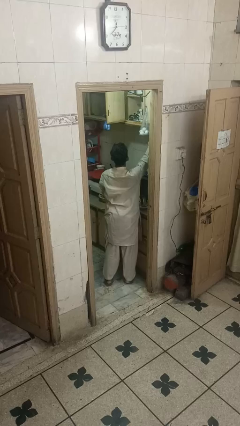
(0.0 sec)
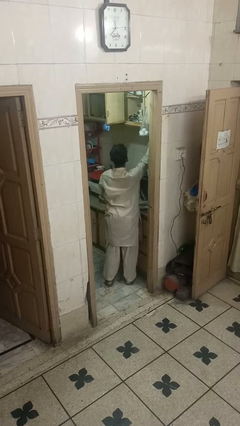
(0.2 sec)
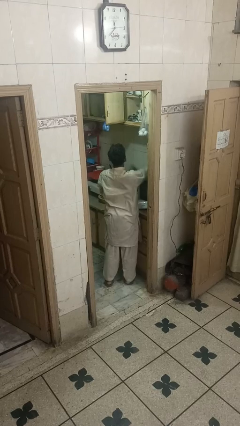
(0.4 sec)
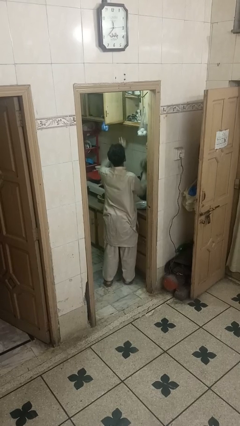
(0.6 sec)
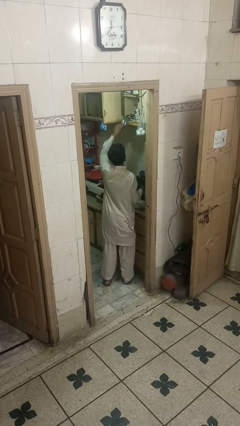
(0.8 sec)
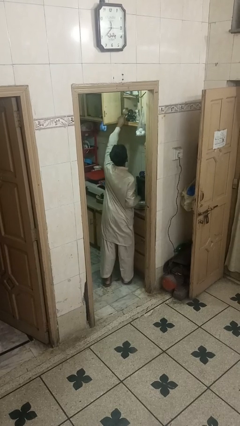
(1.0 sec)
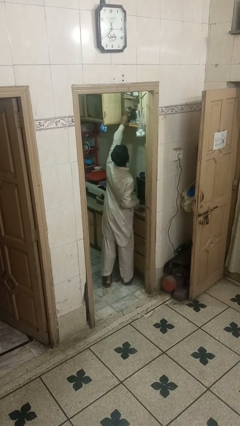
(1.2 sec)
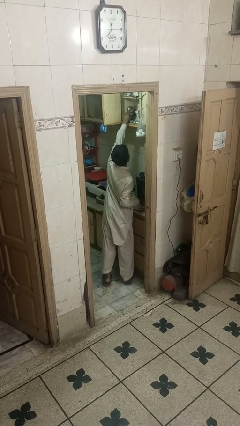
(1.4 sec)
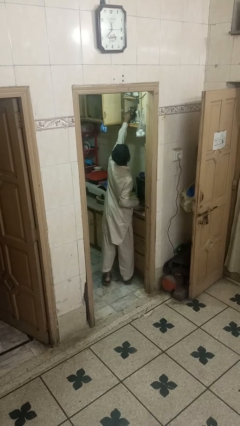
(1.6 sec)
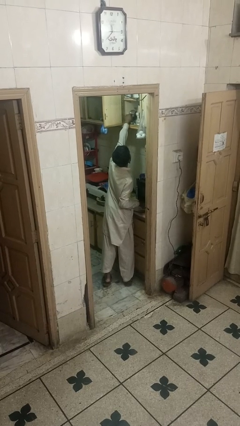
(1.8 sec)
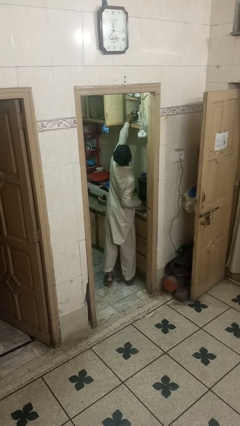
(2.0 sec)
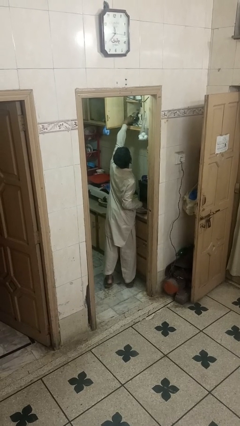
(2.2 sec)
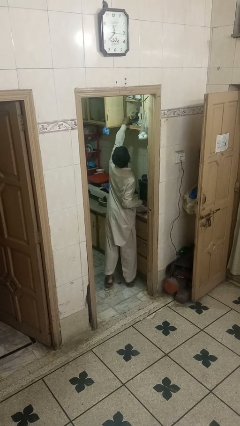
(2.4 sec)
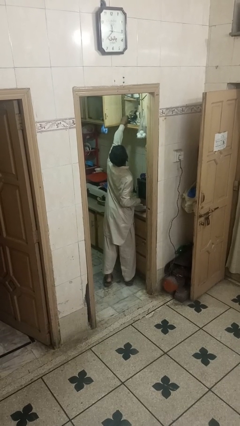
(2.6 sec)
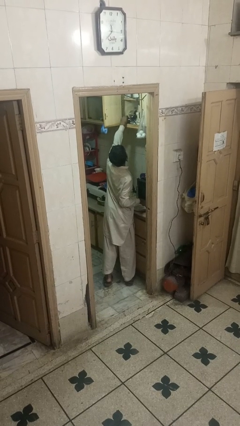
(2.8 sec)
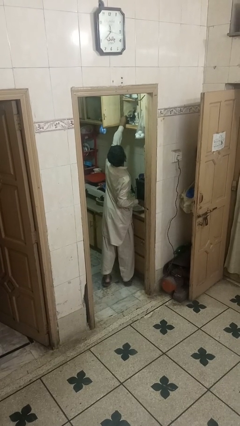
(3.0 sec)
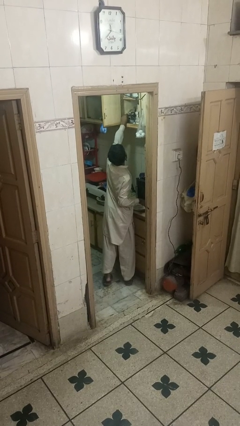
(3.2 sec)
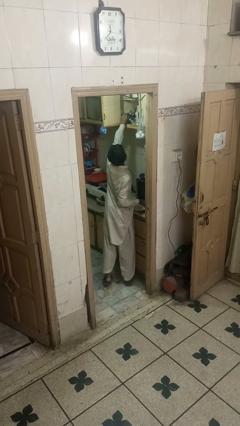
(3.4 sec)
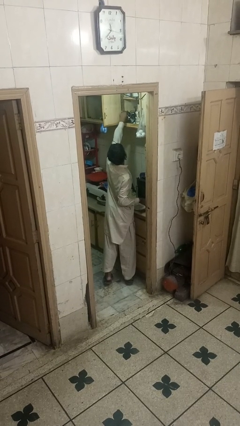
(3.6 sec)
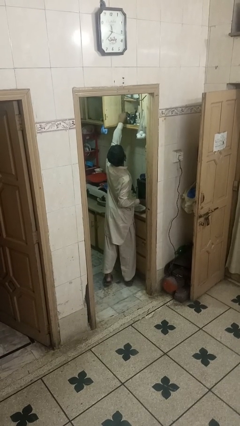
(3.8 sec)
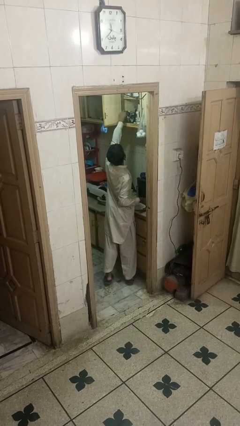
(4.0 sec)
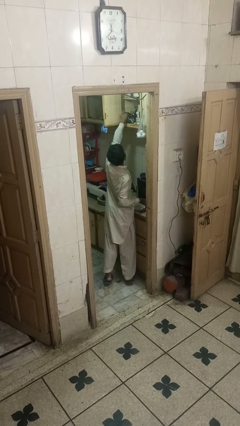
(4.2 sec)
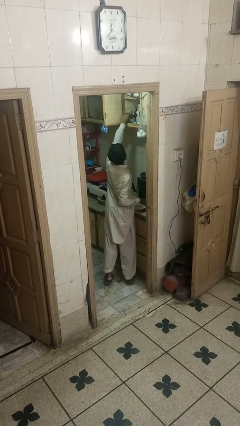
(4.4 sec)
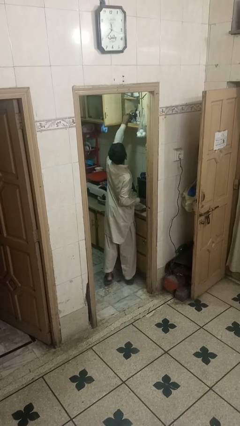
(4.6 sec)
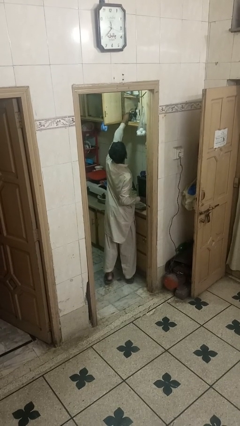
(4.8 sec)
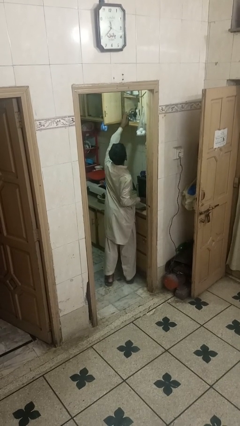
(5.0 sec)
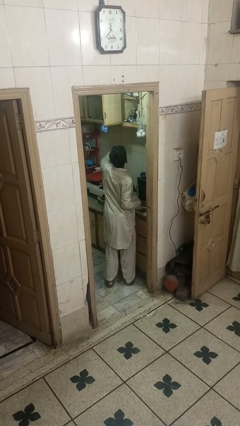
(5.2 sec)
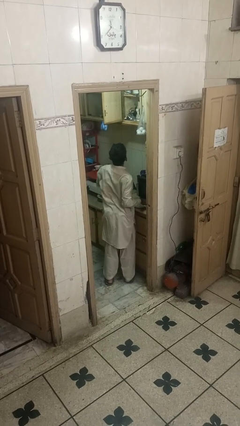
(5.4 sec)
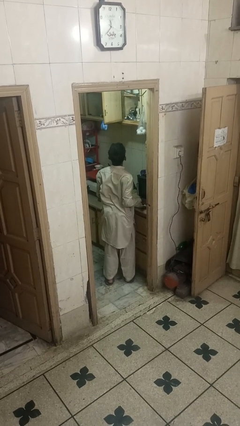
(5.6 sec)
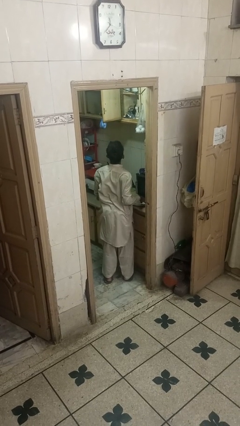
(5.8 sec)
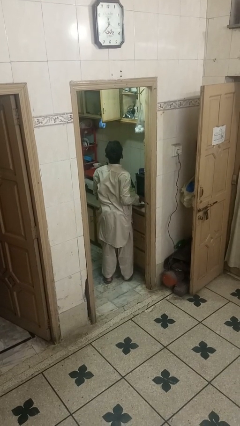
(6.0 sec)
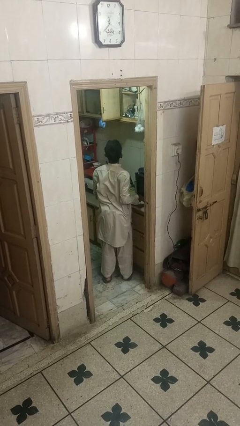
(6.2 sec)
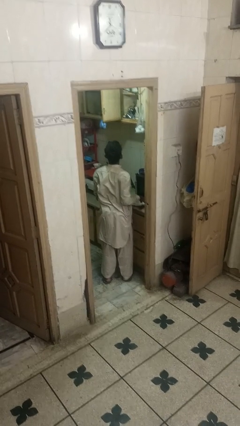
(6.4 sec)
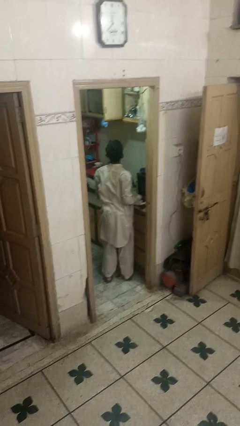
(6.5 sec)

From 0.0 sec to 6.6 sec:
person puts object in cabinet

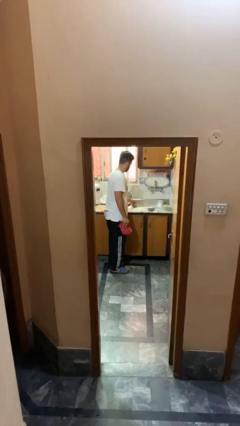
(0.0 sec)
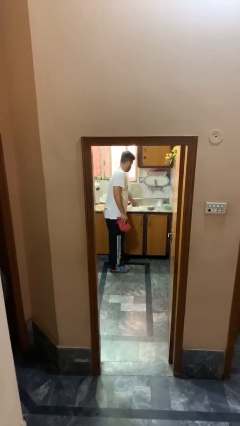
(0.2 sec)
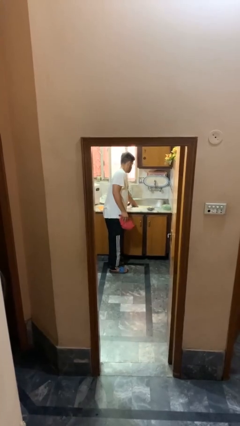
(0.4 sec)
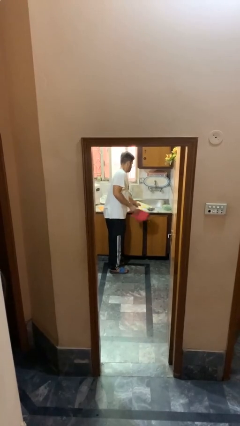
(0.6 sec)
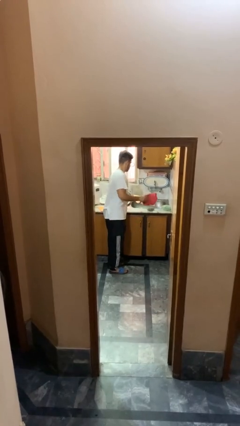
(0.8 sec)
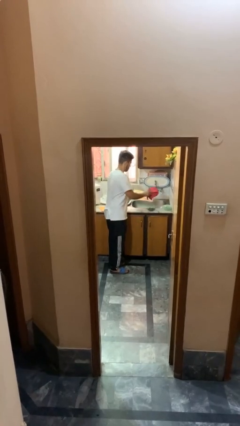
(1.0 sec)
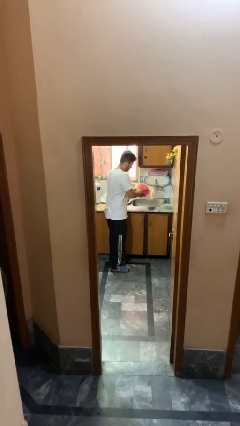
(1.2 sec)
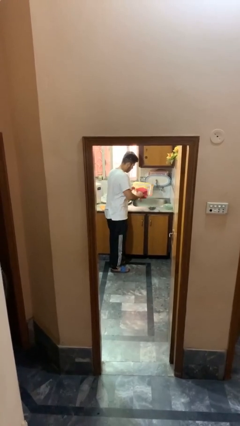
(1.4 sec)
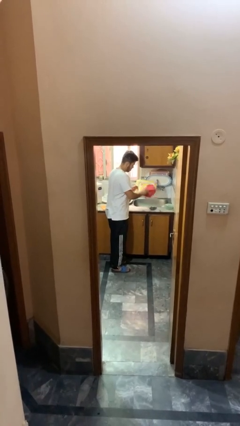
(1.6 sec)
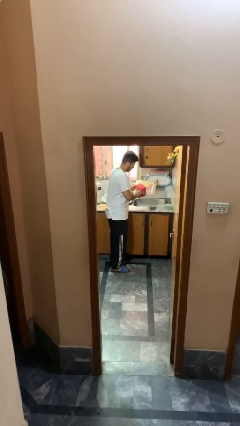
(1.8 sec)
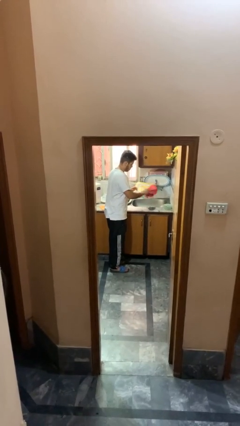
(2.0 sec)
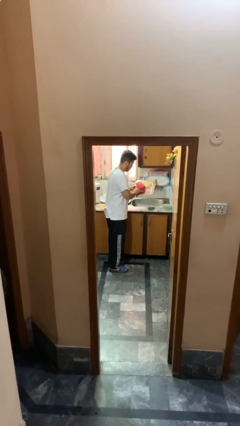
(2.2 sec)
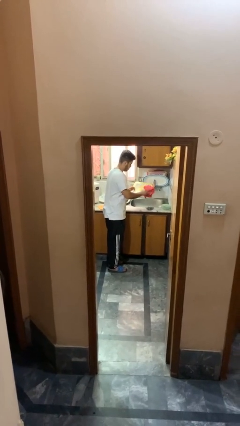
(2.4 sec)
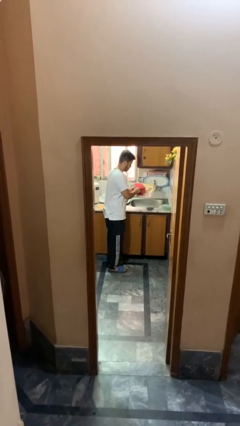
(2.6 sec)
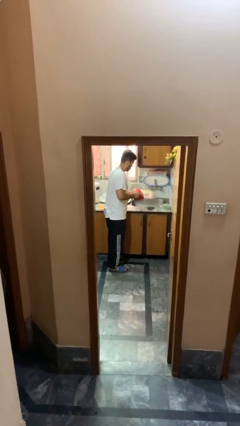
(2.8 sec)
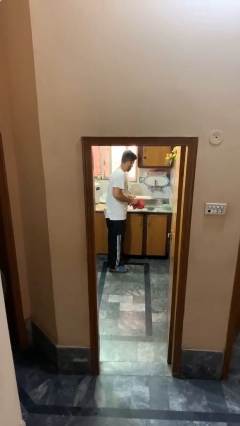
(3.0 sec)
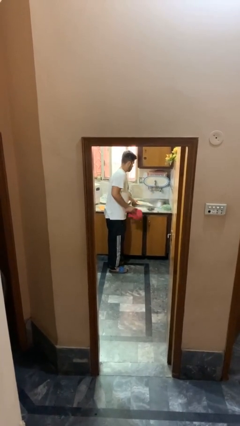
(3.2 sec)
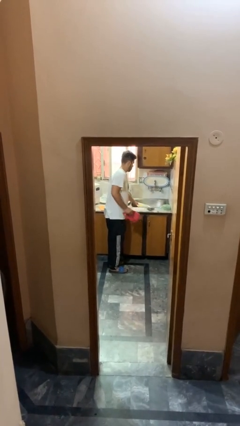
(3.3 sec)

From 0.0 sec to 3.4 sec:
person dries dish

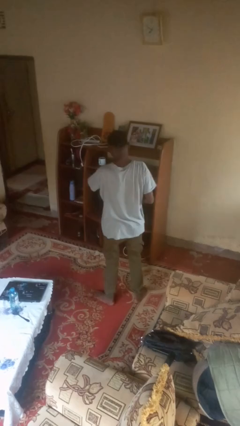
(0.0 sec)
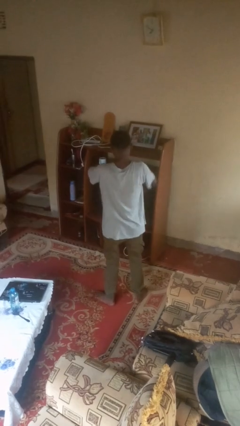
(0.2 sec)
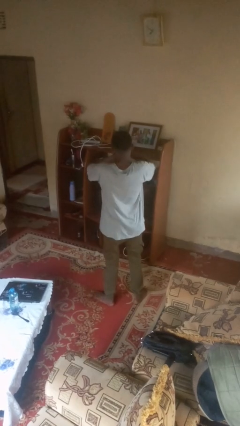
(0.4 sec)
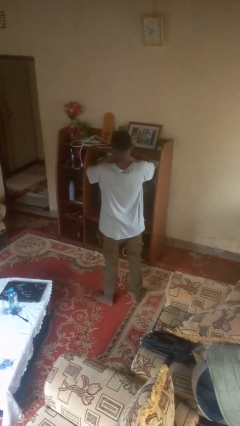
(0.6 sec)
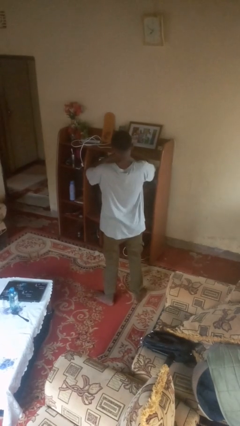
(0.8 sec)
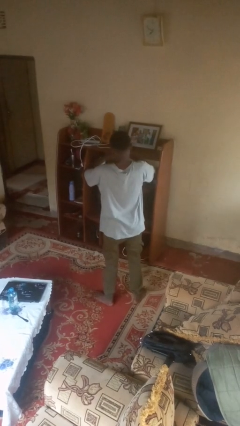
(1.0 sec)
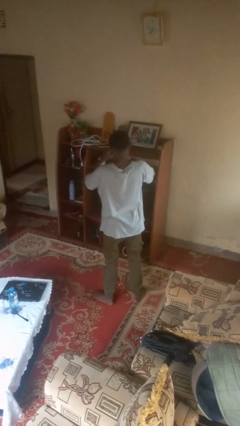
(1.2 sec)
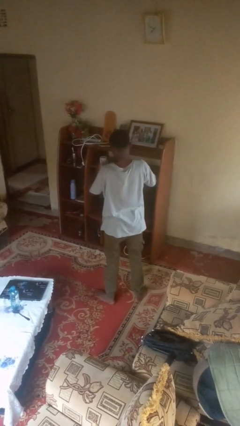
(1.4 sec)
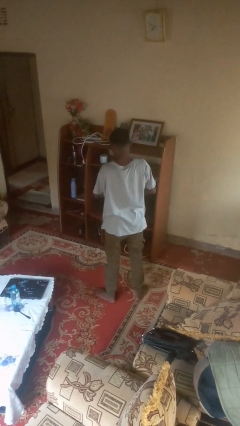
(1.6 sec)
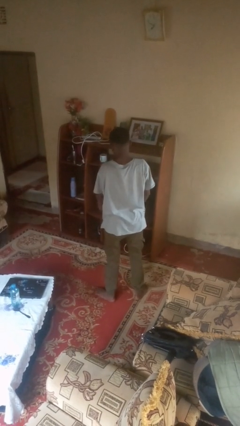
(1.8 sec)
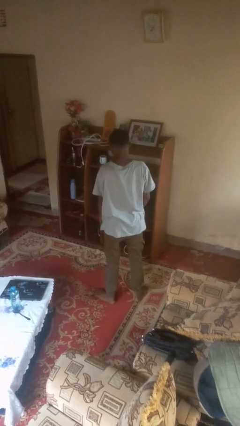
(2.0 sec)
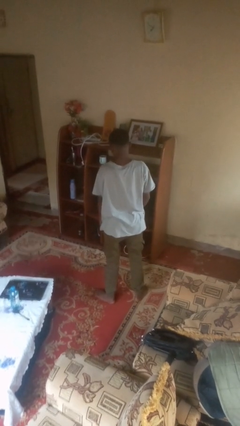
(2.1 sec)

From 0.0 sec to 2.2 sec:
person takes off wristwatch

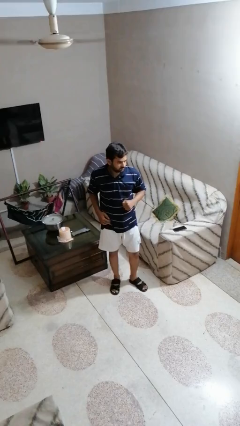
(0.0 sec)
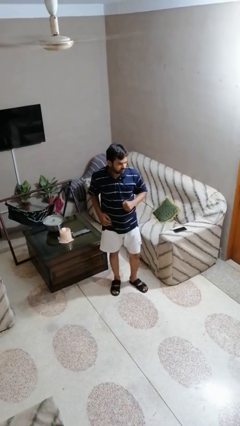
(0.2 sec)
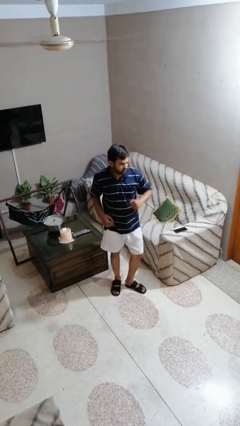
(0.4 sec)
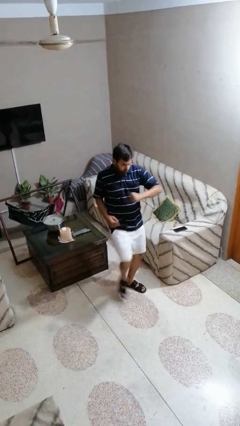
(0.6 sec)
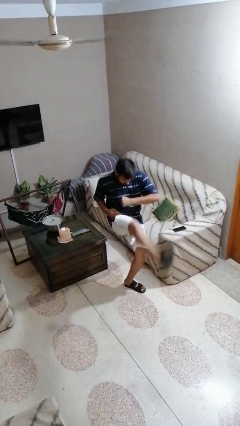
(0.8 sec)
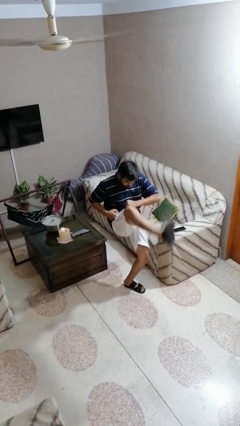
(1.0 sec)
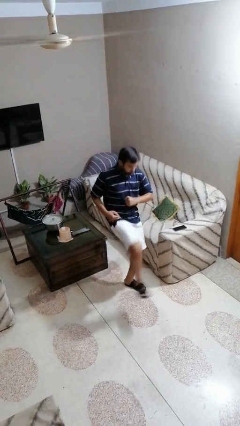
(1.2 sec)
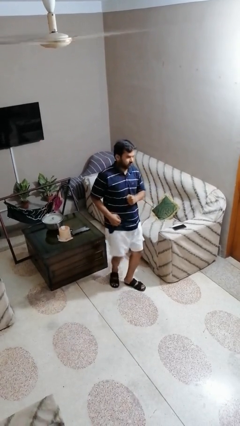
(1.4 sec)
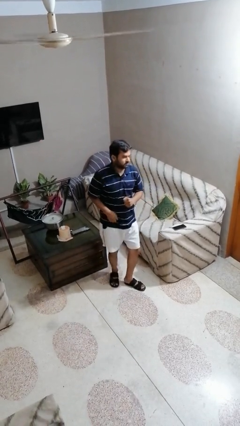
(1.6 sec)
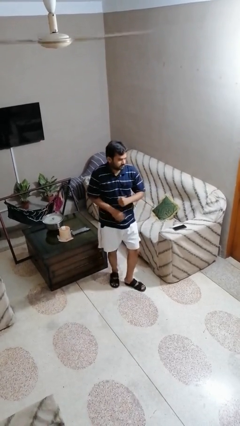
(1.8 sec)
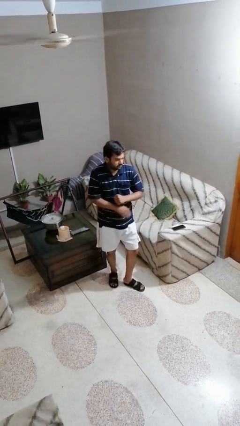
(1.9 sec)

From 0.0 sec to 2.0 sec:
person karate kicks

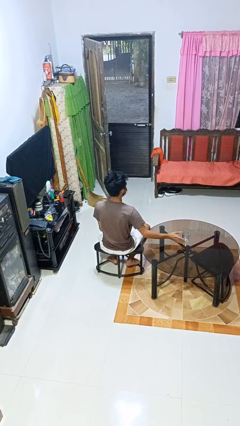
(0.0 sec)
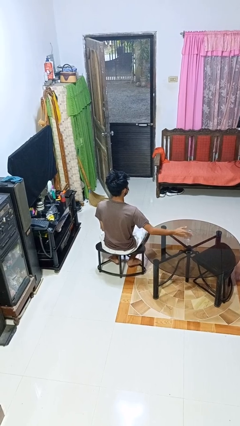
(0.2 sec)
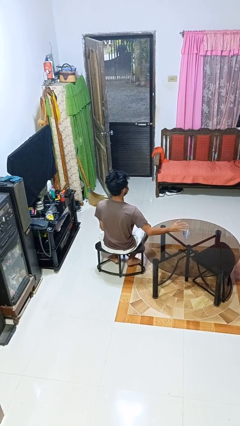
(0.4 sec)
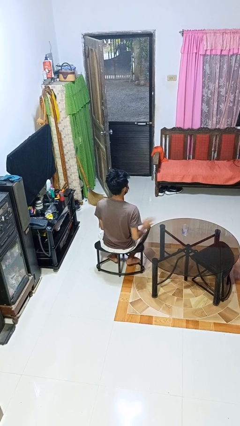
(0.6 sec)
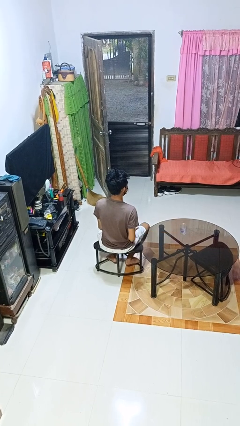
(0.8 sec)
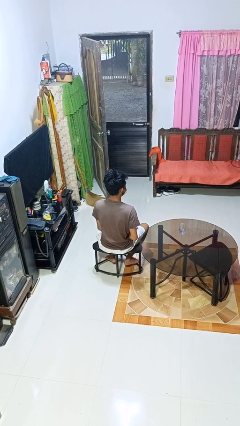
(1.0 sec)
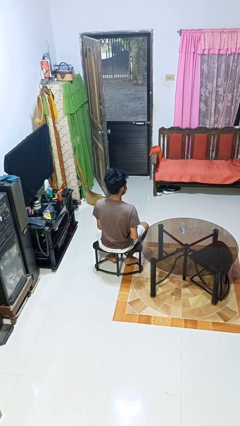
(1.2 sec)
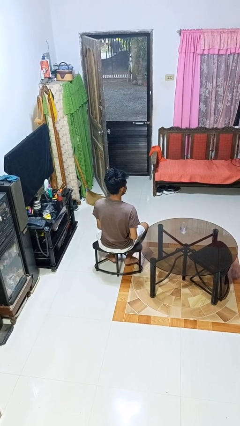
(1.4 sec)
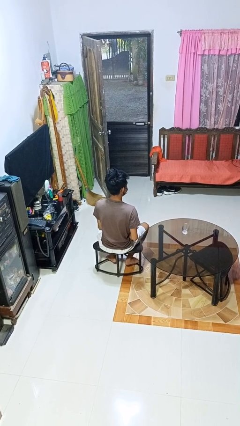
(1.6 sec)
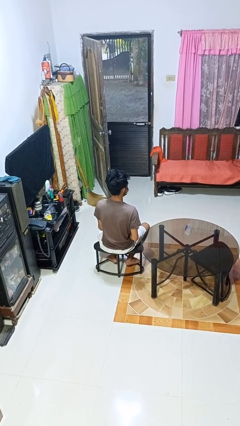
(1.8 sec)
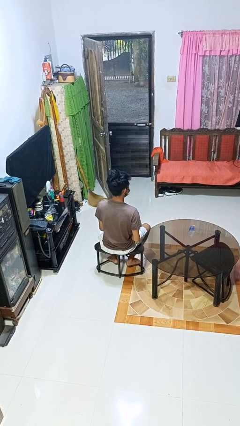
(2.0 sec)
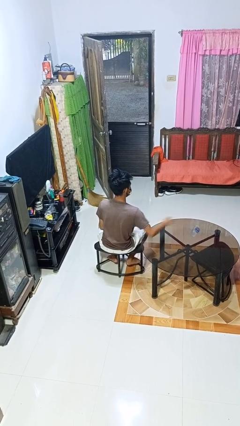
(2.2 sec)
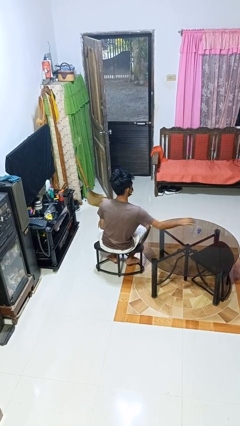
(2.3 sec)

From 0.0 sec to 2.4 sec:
person knocks over glass

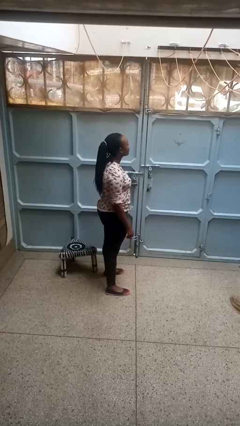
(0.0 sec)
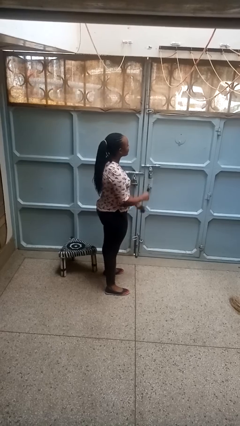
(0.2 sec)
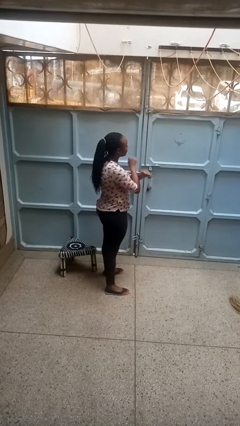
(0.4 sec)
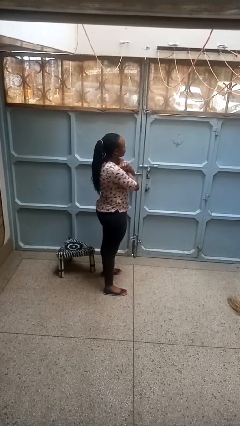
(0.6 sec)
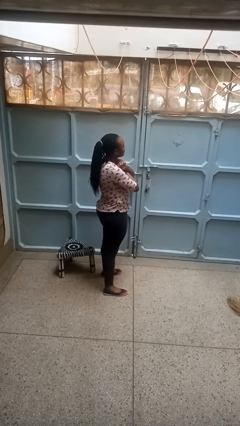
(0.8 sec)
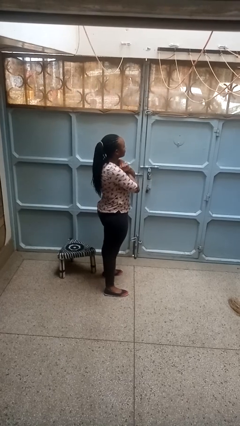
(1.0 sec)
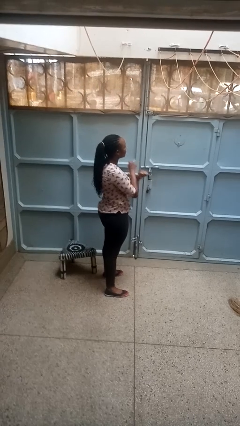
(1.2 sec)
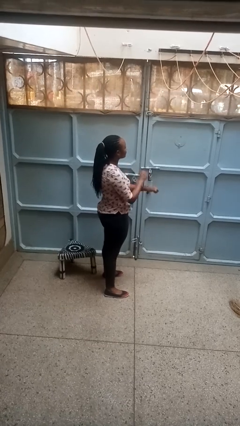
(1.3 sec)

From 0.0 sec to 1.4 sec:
person gestures arms x
